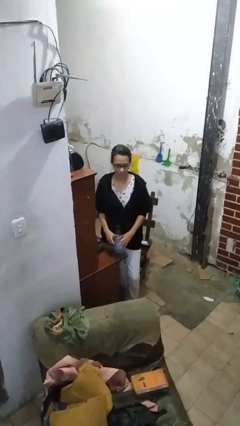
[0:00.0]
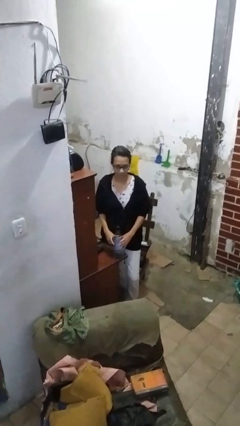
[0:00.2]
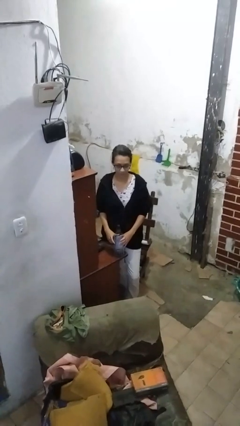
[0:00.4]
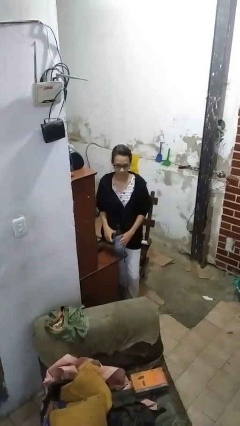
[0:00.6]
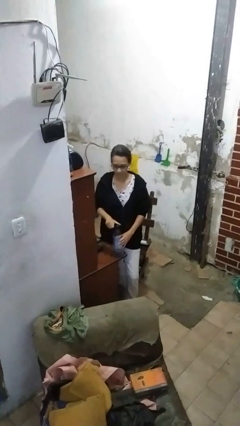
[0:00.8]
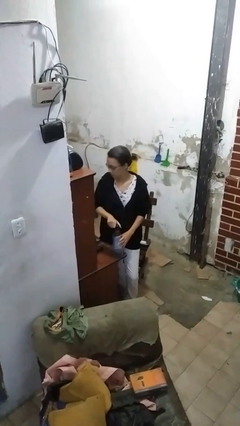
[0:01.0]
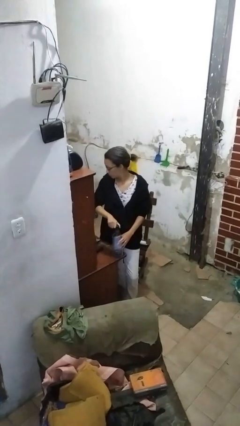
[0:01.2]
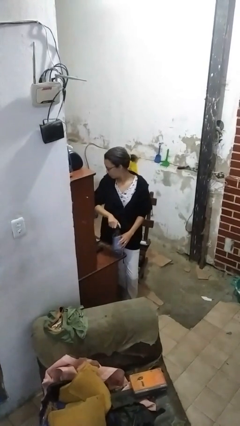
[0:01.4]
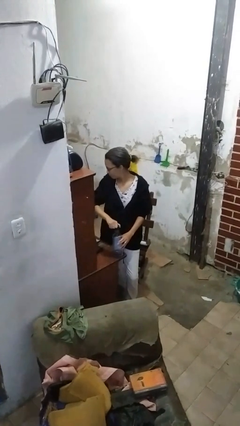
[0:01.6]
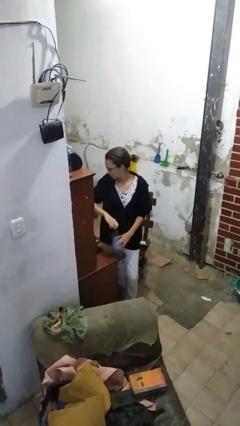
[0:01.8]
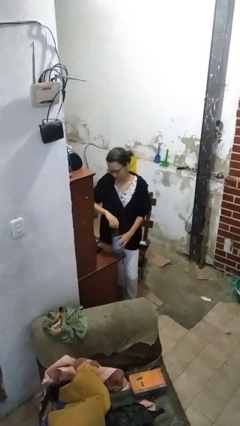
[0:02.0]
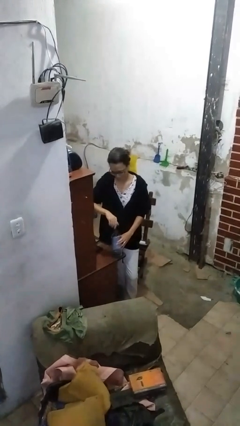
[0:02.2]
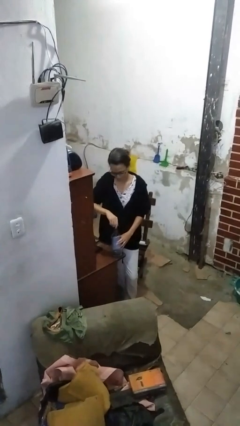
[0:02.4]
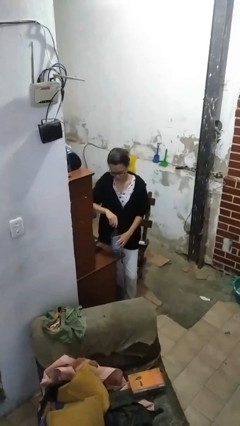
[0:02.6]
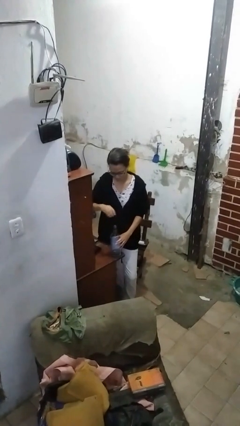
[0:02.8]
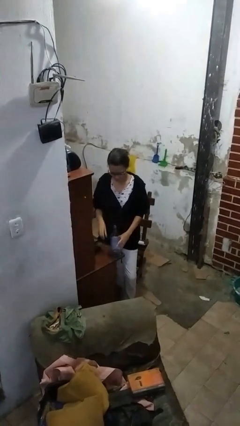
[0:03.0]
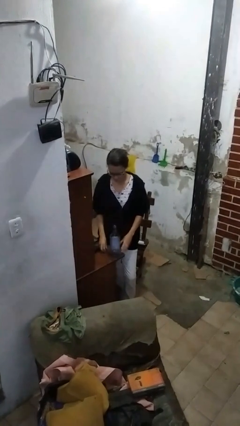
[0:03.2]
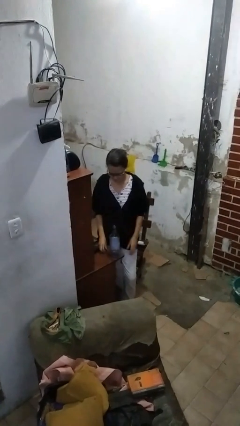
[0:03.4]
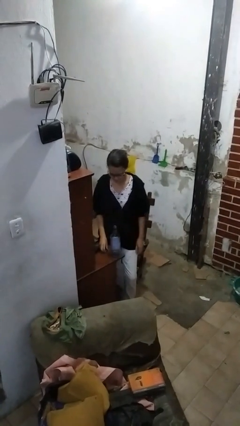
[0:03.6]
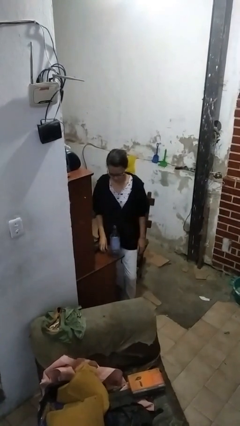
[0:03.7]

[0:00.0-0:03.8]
person unscrews lid from bottle

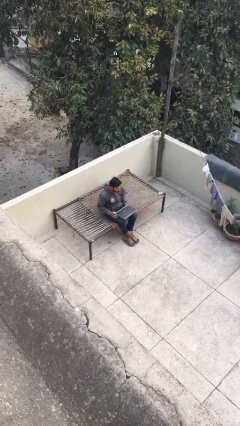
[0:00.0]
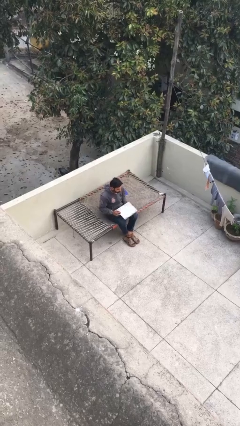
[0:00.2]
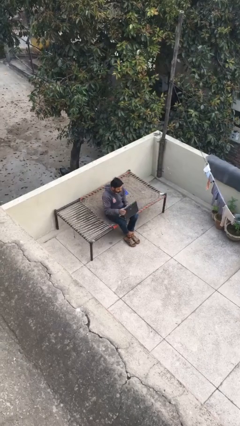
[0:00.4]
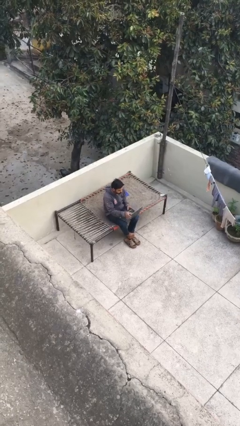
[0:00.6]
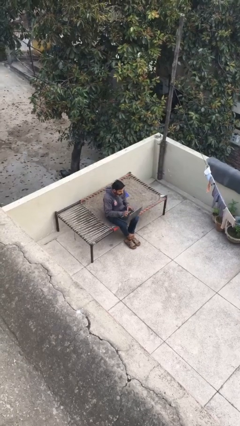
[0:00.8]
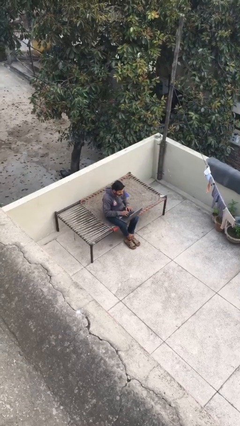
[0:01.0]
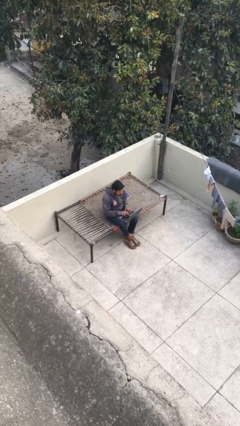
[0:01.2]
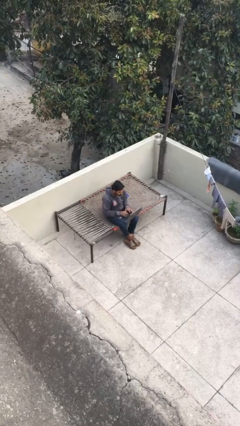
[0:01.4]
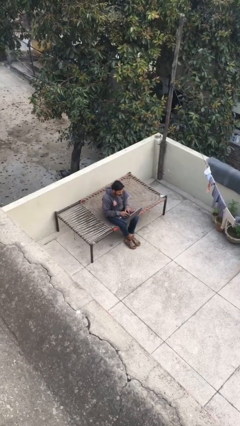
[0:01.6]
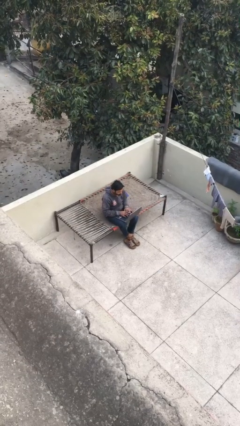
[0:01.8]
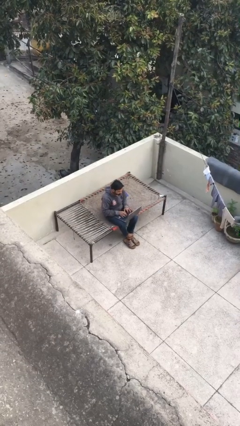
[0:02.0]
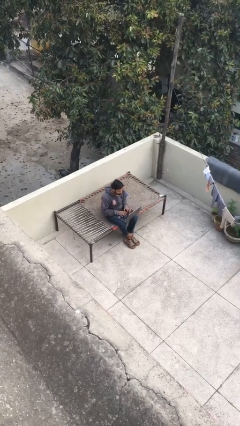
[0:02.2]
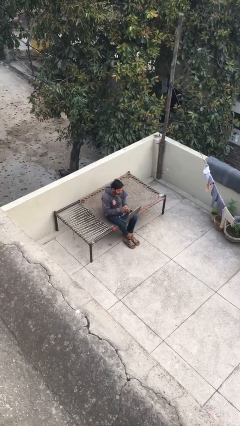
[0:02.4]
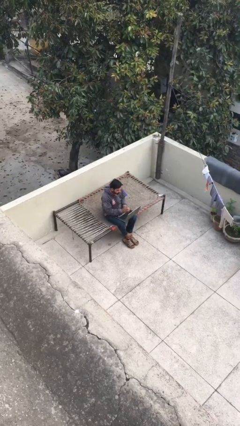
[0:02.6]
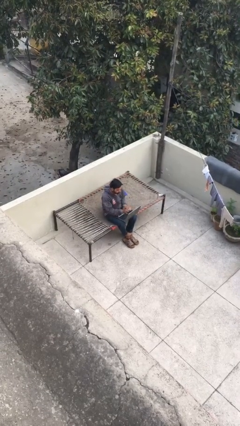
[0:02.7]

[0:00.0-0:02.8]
person interacts with laptop

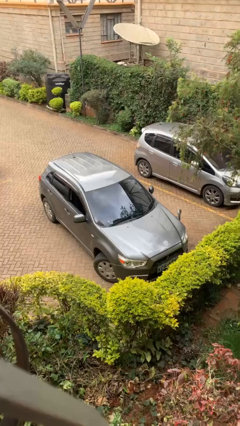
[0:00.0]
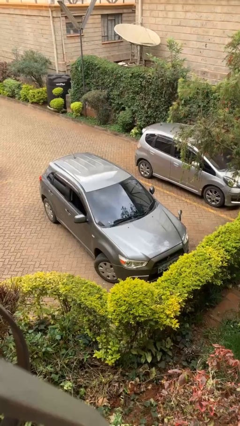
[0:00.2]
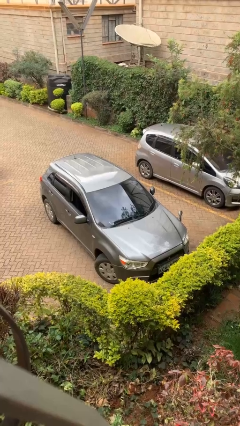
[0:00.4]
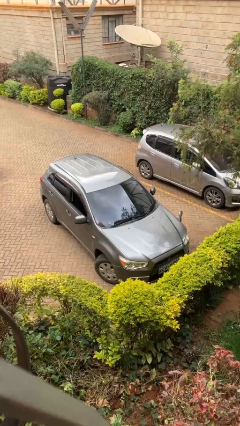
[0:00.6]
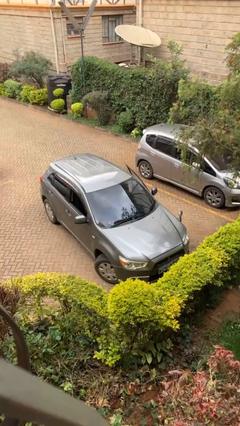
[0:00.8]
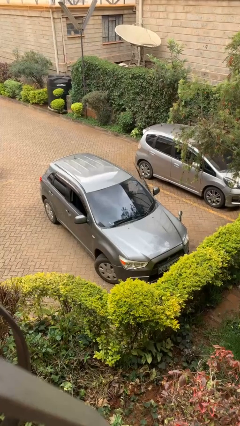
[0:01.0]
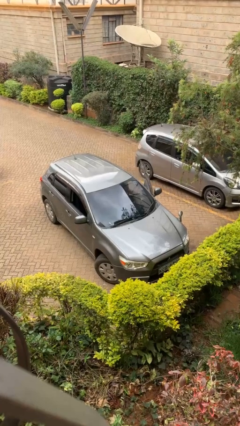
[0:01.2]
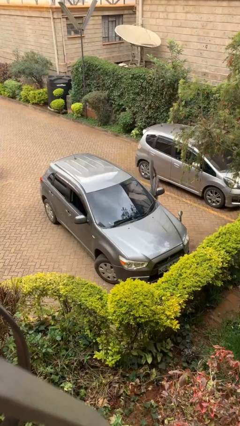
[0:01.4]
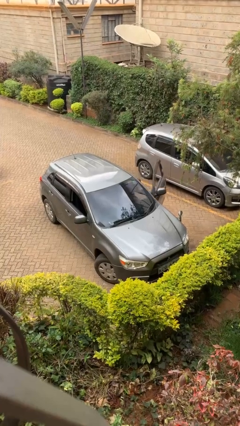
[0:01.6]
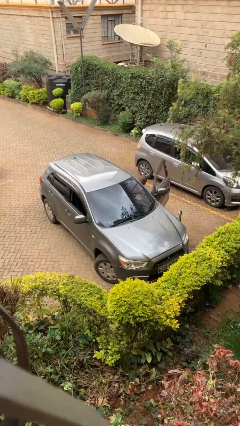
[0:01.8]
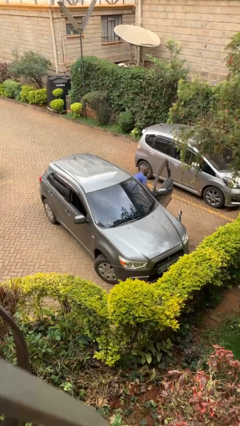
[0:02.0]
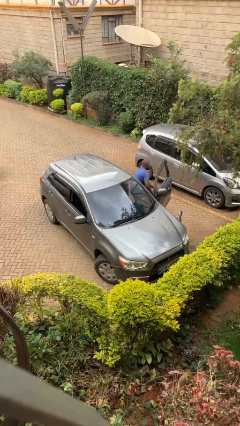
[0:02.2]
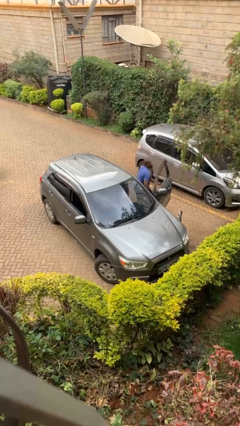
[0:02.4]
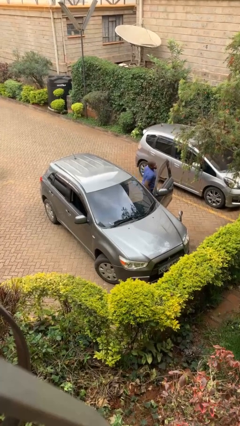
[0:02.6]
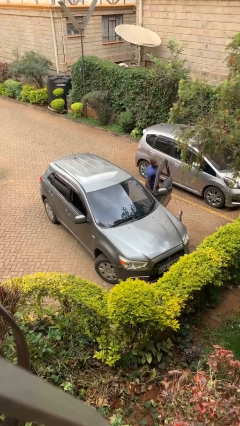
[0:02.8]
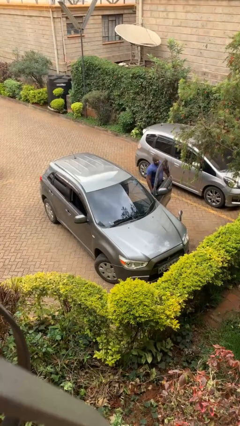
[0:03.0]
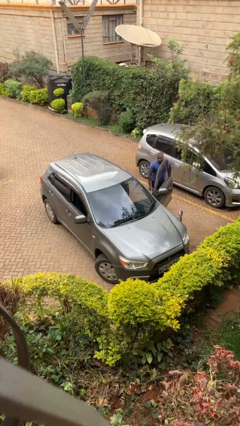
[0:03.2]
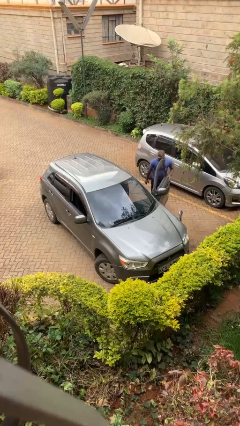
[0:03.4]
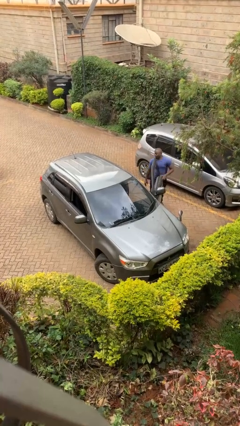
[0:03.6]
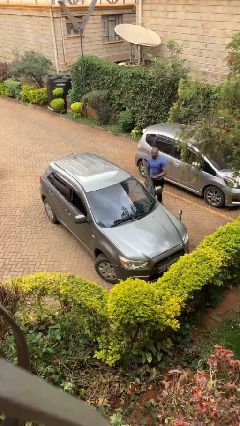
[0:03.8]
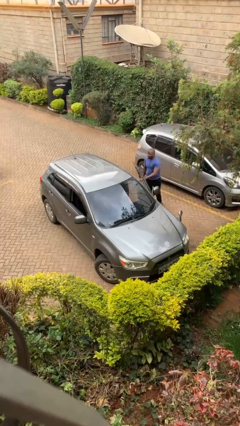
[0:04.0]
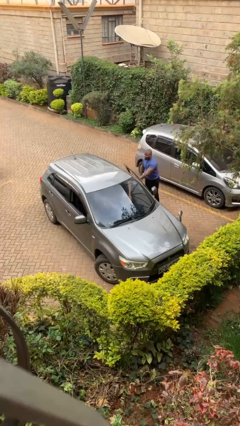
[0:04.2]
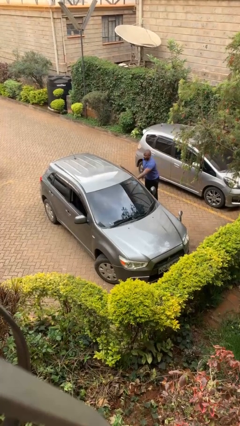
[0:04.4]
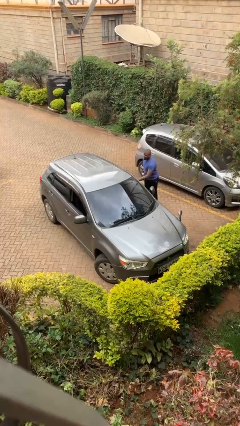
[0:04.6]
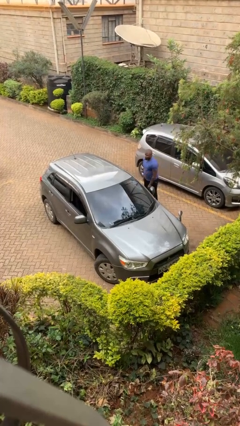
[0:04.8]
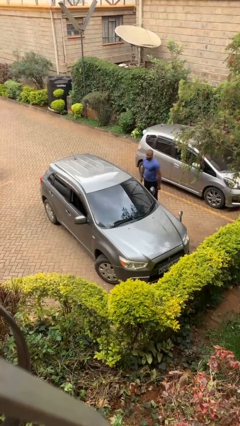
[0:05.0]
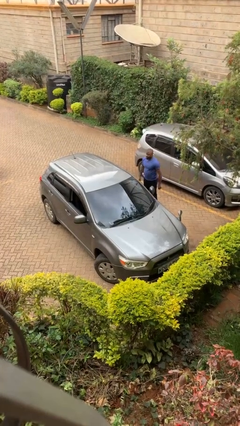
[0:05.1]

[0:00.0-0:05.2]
car drops off person

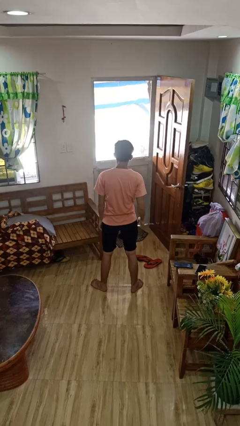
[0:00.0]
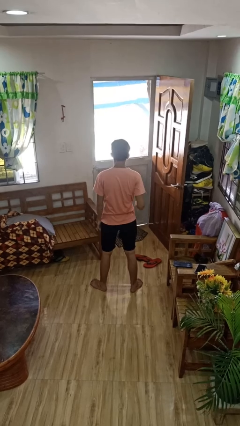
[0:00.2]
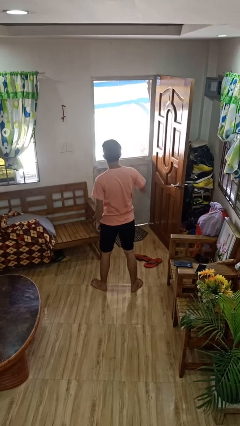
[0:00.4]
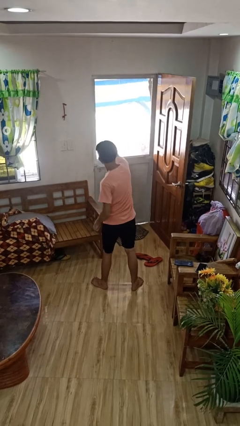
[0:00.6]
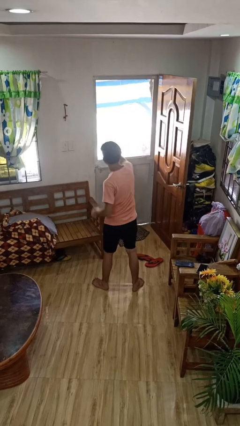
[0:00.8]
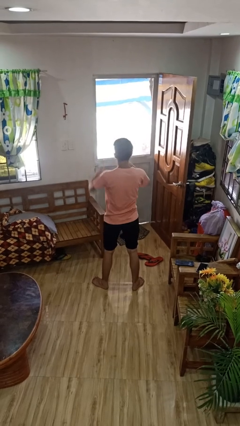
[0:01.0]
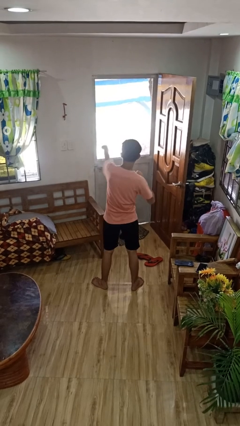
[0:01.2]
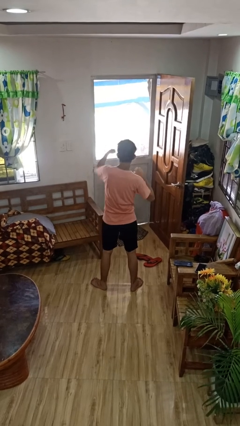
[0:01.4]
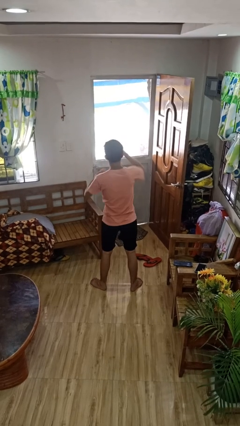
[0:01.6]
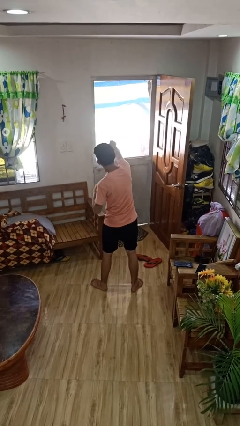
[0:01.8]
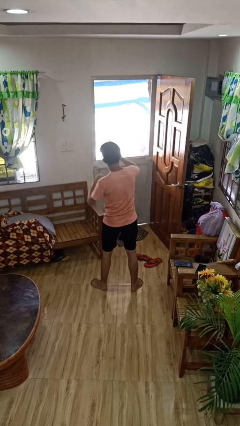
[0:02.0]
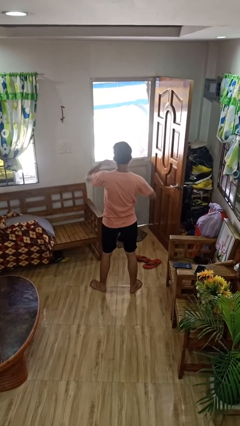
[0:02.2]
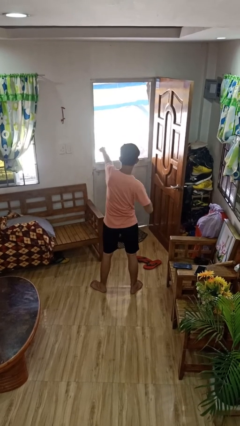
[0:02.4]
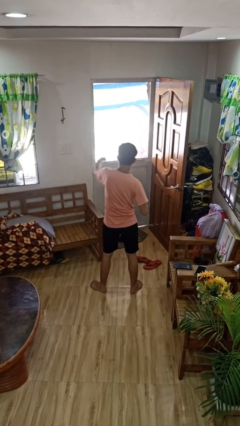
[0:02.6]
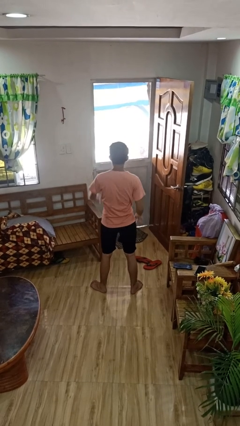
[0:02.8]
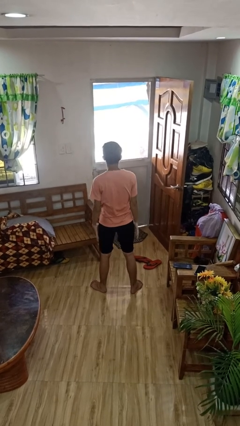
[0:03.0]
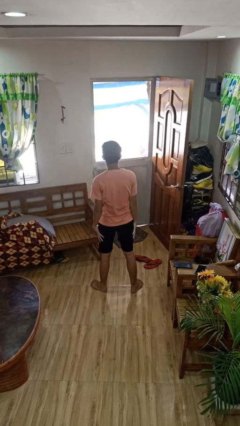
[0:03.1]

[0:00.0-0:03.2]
person punches

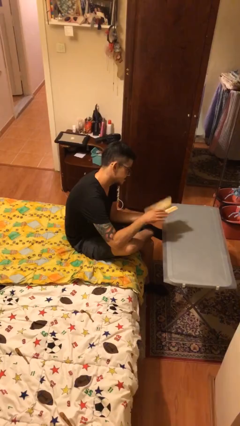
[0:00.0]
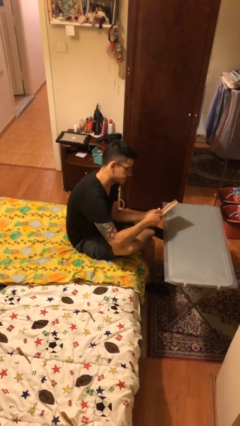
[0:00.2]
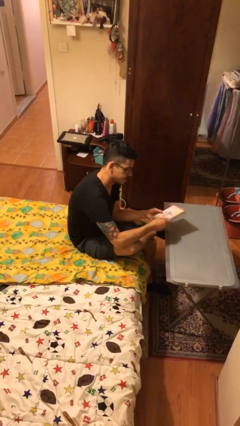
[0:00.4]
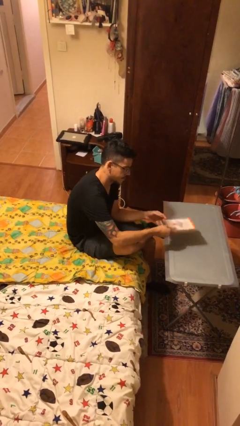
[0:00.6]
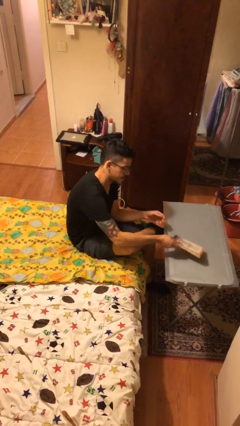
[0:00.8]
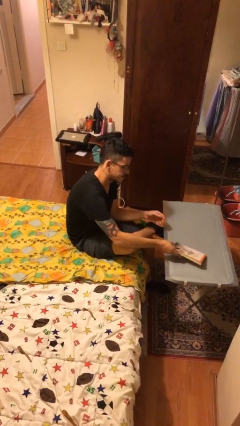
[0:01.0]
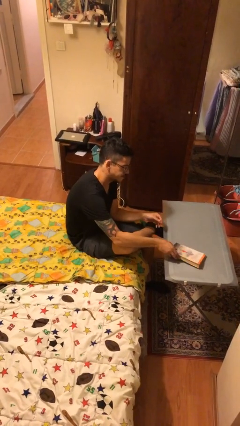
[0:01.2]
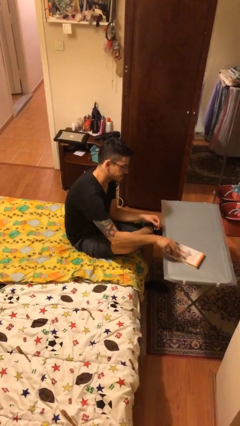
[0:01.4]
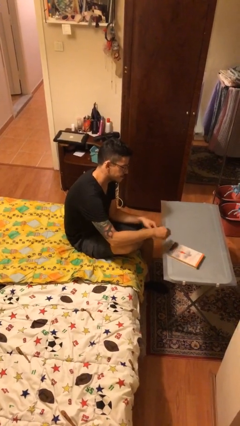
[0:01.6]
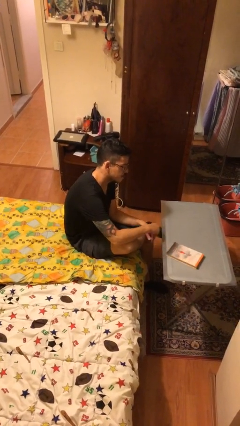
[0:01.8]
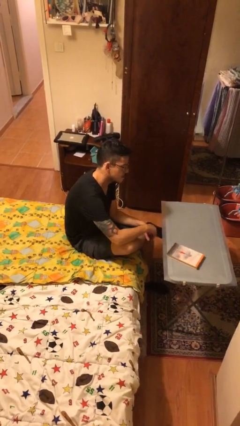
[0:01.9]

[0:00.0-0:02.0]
person puts down object on table

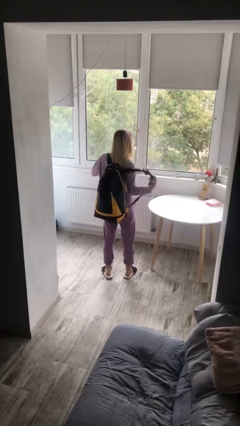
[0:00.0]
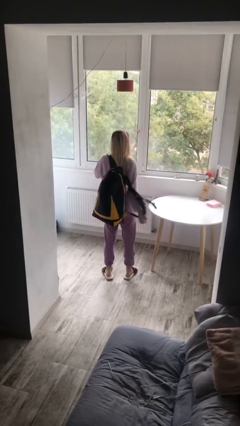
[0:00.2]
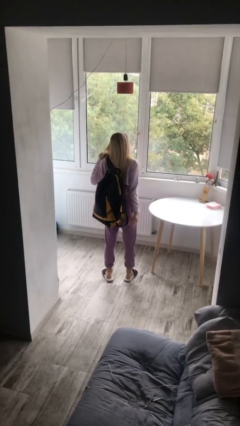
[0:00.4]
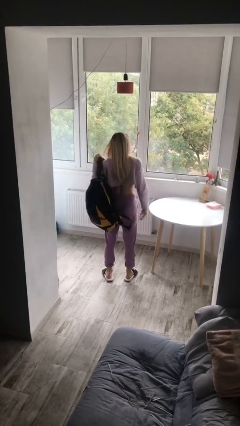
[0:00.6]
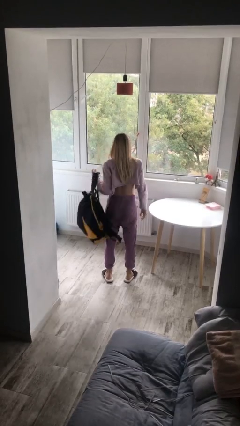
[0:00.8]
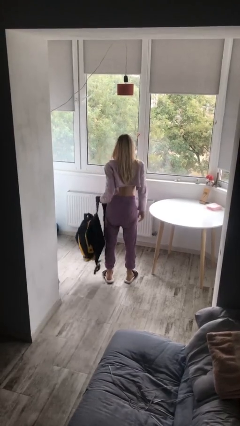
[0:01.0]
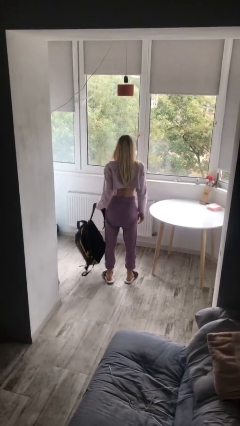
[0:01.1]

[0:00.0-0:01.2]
person takes off backpack
